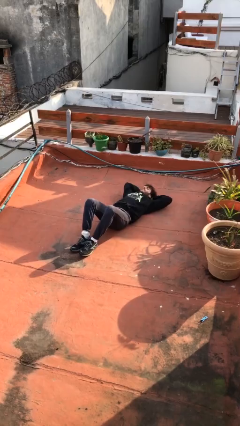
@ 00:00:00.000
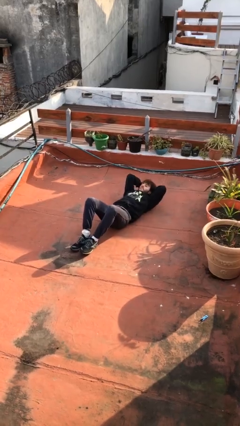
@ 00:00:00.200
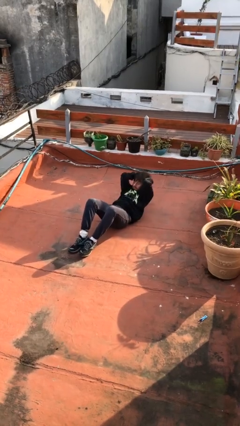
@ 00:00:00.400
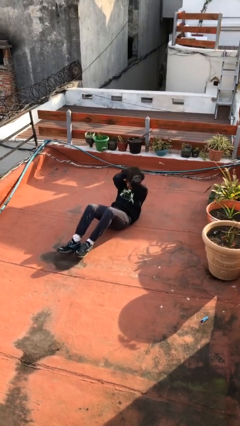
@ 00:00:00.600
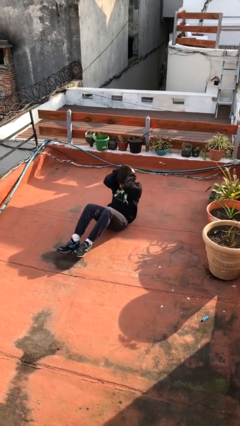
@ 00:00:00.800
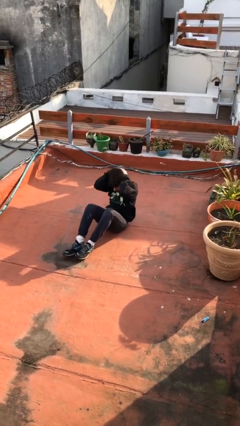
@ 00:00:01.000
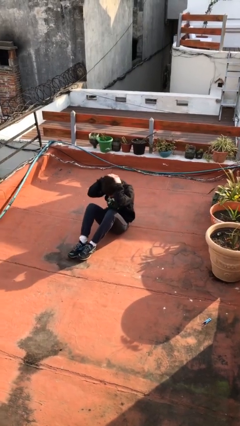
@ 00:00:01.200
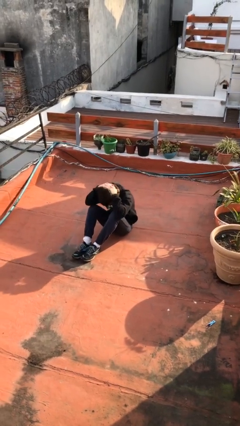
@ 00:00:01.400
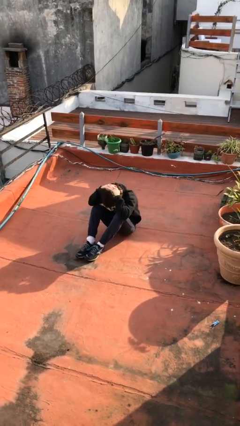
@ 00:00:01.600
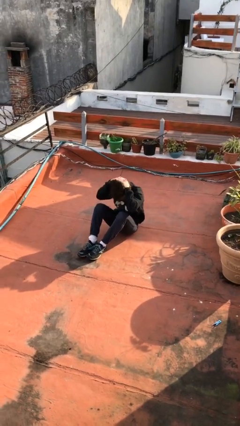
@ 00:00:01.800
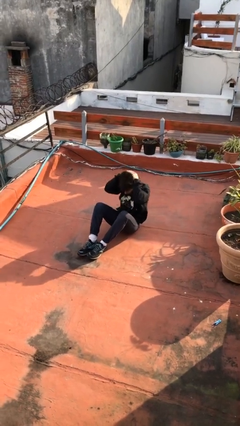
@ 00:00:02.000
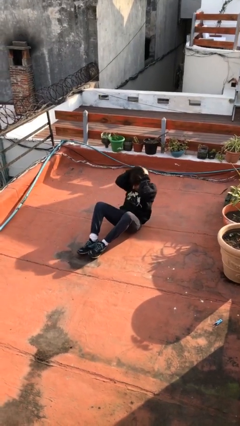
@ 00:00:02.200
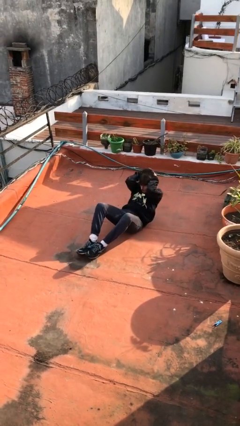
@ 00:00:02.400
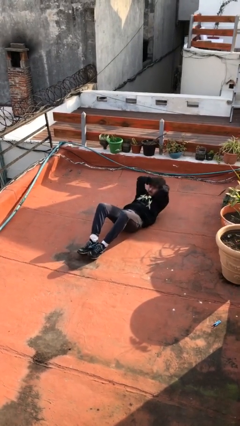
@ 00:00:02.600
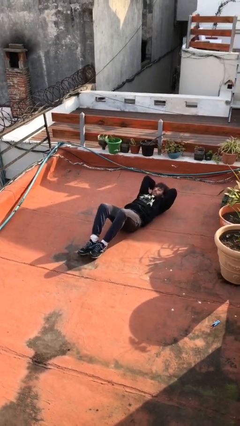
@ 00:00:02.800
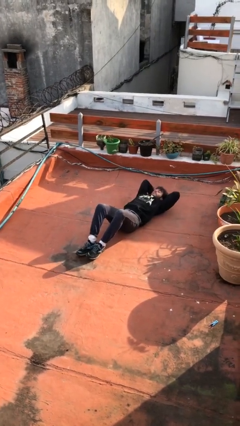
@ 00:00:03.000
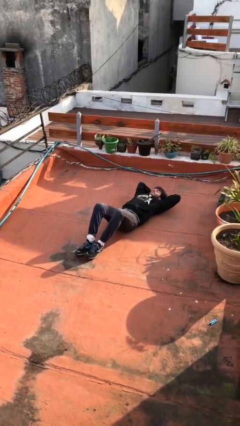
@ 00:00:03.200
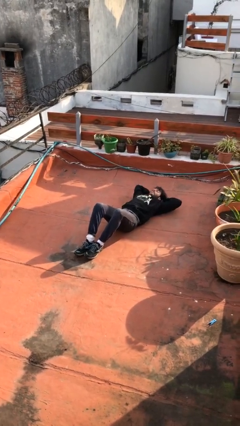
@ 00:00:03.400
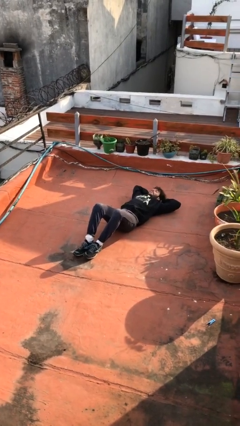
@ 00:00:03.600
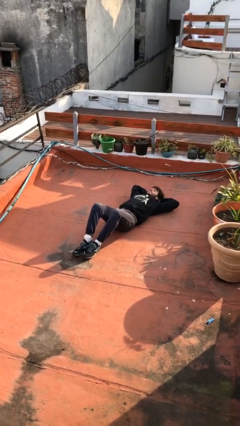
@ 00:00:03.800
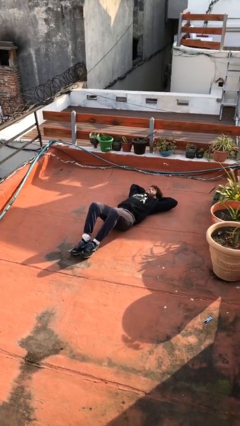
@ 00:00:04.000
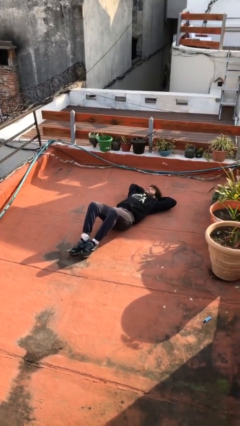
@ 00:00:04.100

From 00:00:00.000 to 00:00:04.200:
person exercises with situp

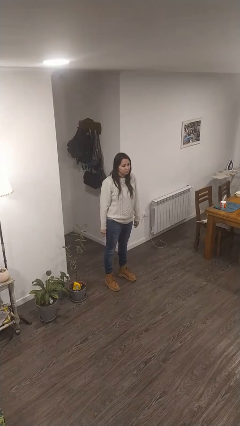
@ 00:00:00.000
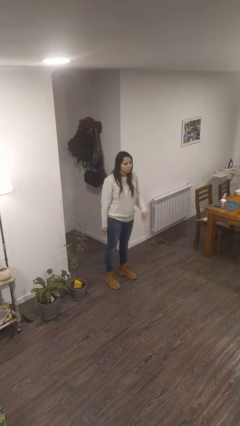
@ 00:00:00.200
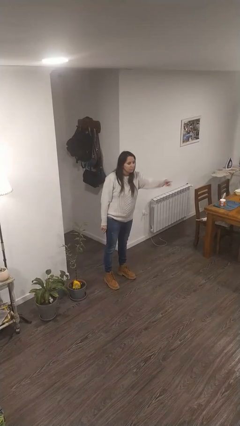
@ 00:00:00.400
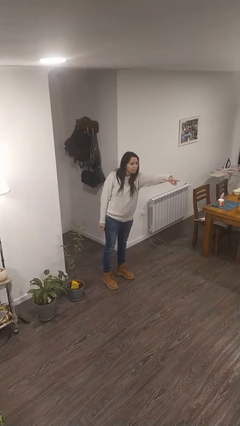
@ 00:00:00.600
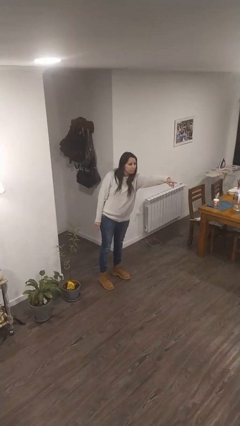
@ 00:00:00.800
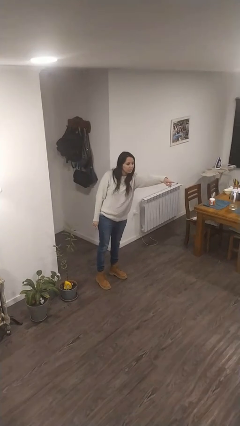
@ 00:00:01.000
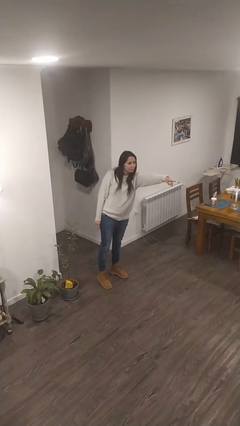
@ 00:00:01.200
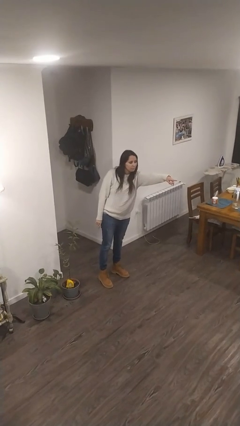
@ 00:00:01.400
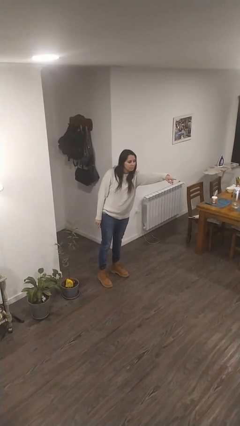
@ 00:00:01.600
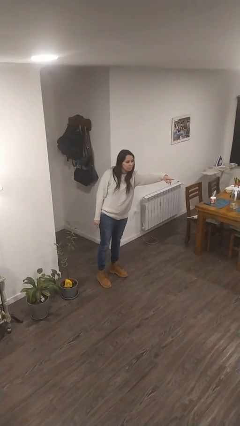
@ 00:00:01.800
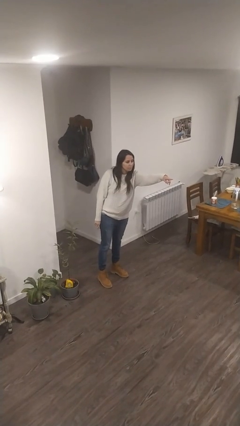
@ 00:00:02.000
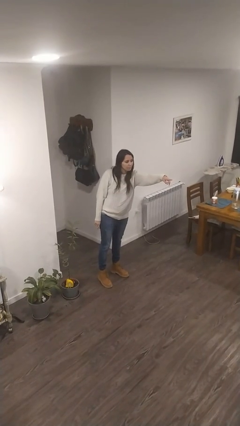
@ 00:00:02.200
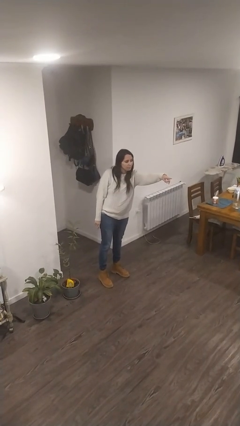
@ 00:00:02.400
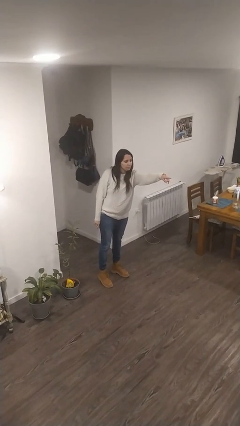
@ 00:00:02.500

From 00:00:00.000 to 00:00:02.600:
person points at person

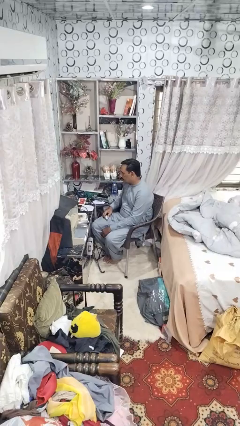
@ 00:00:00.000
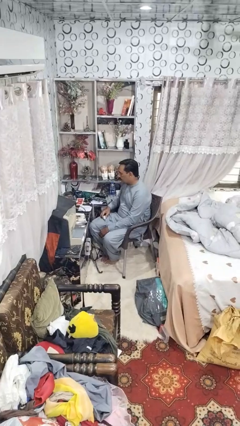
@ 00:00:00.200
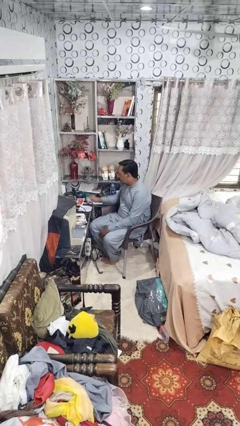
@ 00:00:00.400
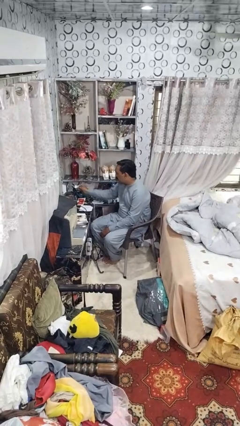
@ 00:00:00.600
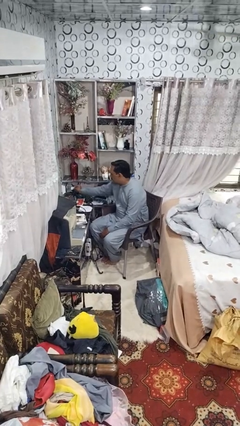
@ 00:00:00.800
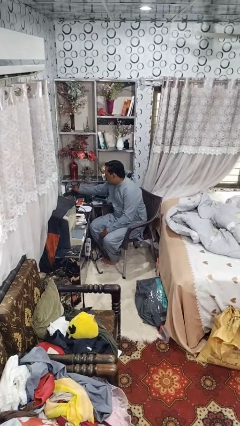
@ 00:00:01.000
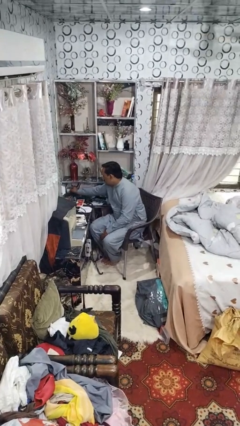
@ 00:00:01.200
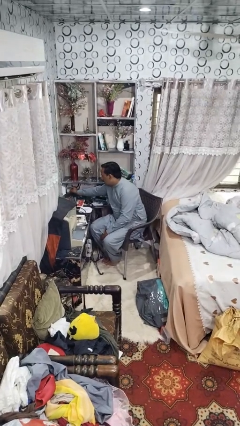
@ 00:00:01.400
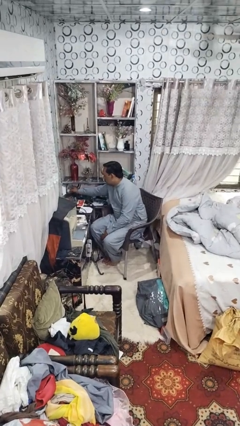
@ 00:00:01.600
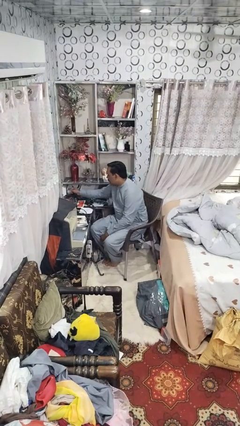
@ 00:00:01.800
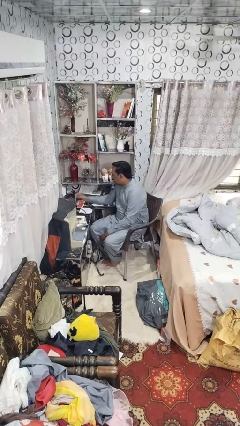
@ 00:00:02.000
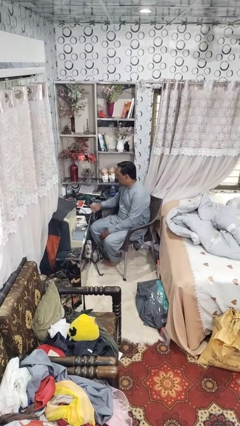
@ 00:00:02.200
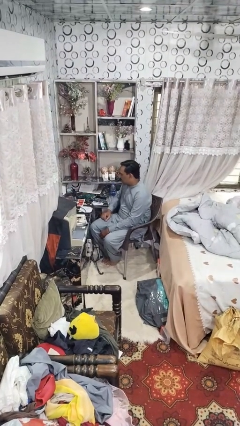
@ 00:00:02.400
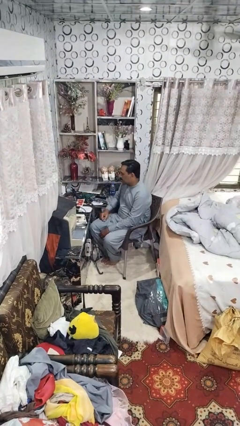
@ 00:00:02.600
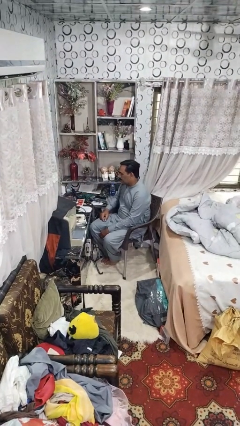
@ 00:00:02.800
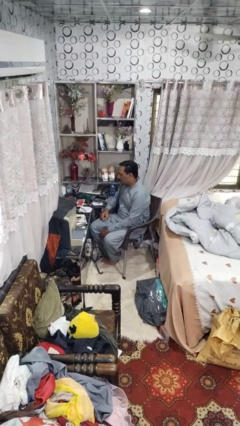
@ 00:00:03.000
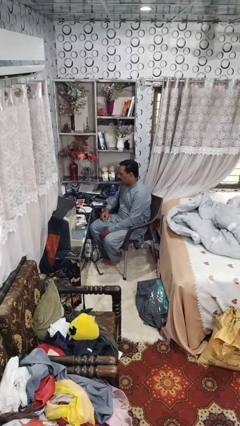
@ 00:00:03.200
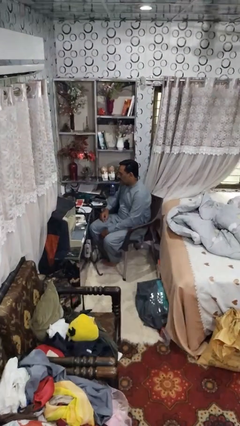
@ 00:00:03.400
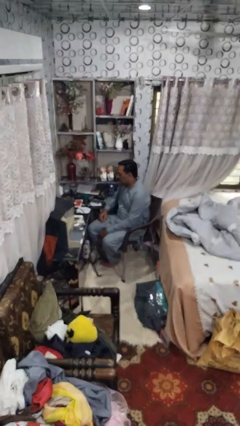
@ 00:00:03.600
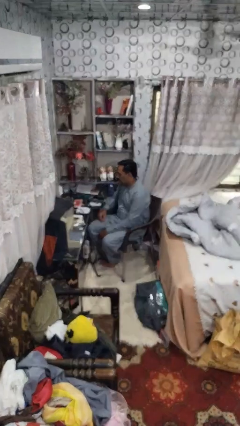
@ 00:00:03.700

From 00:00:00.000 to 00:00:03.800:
person plugs into electrical socket

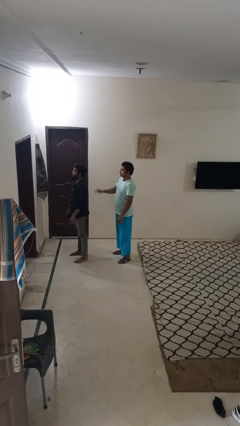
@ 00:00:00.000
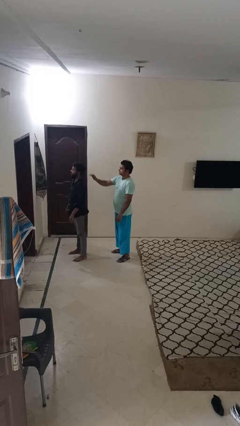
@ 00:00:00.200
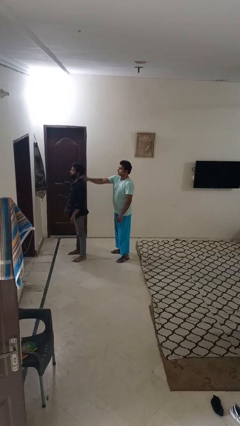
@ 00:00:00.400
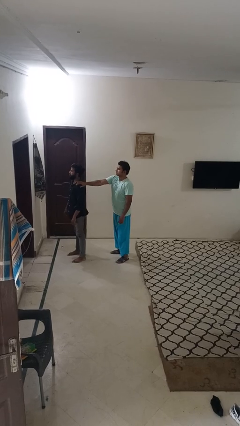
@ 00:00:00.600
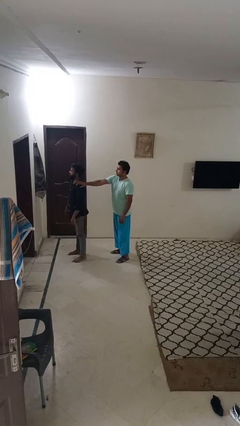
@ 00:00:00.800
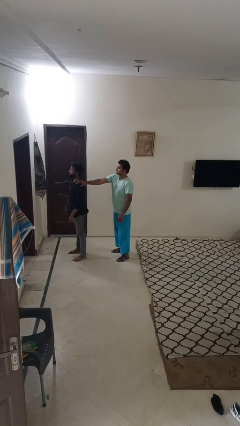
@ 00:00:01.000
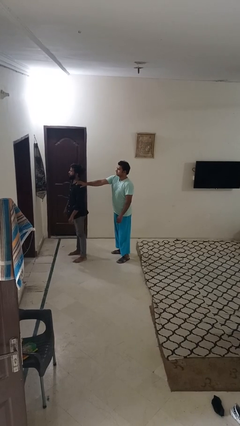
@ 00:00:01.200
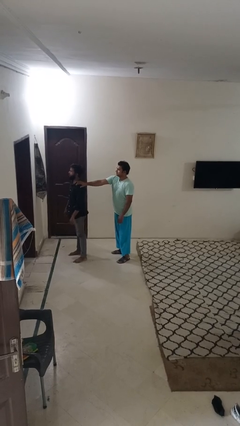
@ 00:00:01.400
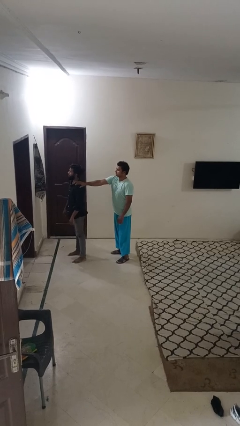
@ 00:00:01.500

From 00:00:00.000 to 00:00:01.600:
person grabs person by shoulder

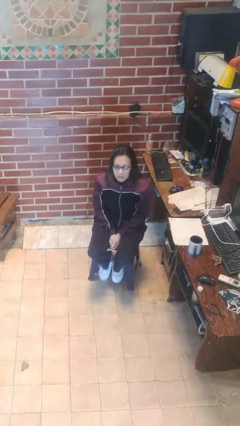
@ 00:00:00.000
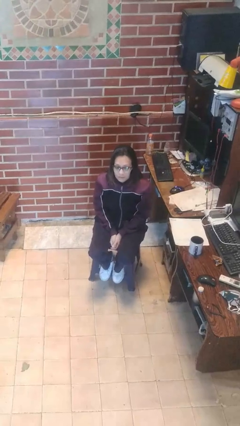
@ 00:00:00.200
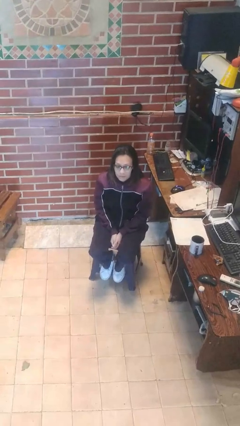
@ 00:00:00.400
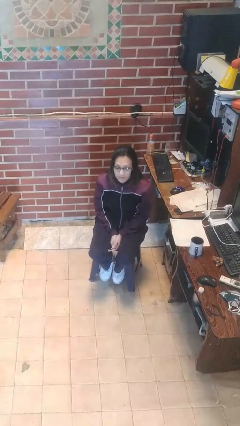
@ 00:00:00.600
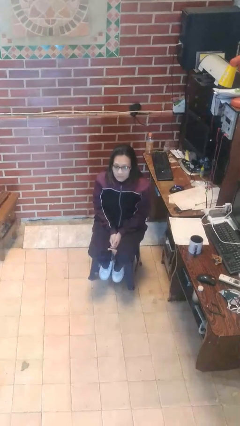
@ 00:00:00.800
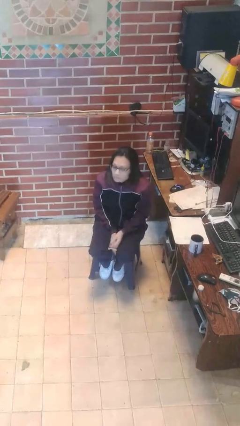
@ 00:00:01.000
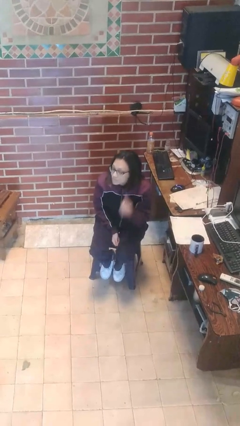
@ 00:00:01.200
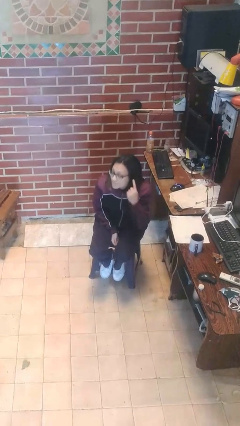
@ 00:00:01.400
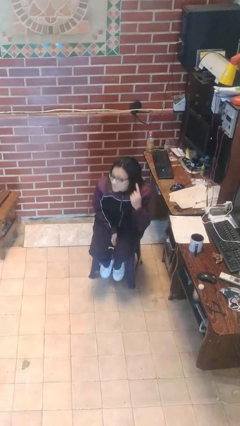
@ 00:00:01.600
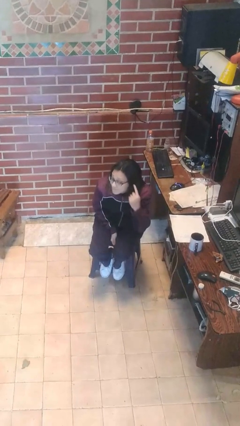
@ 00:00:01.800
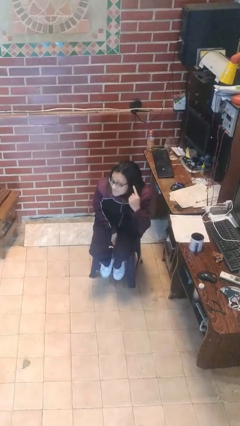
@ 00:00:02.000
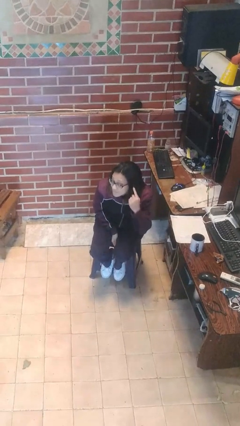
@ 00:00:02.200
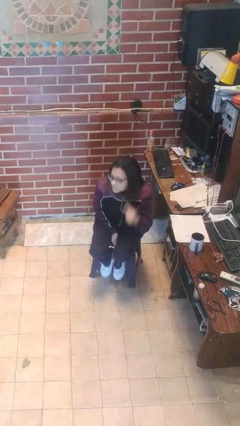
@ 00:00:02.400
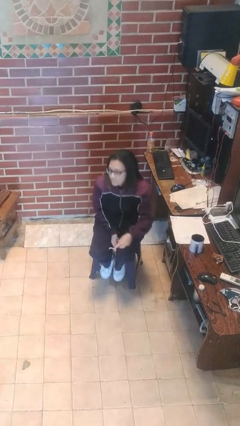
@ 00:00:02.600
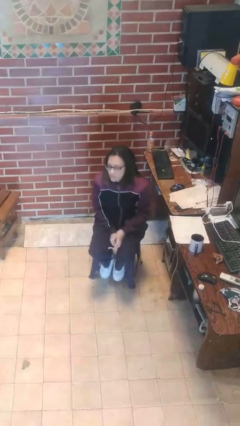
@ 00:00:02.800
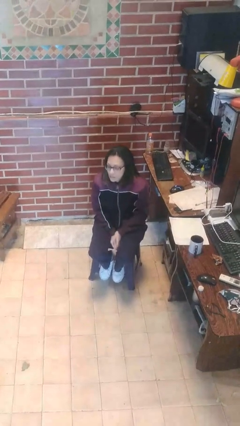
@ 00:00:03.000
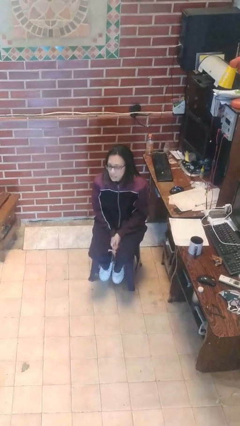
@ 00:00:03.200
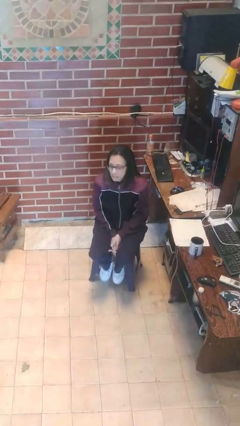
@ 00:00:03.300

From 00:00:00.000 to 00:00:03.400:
person gestures listen closely

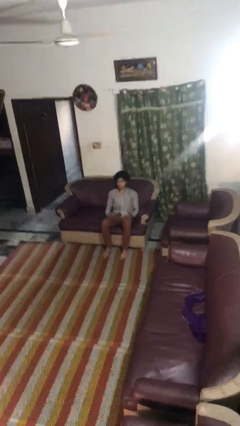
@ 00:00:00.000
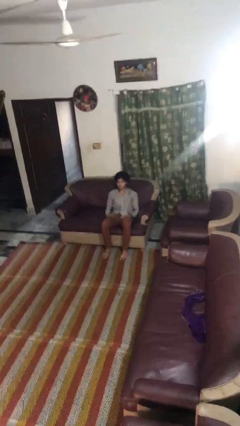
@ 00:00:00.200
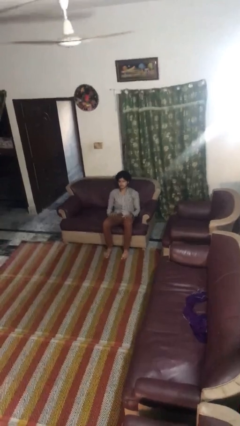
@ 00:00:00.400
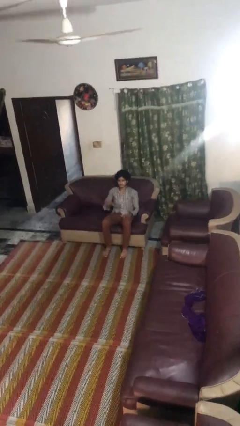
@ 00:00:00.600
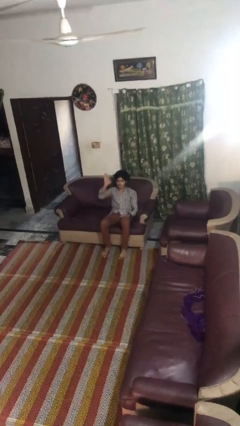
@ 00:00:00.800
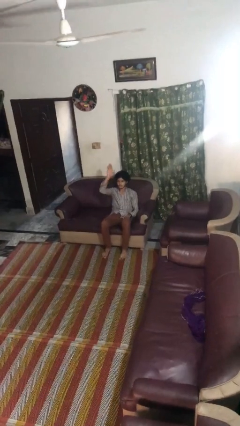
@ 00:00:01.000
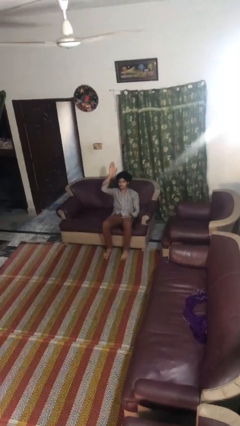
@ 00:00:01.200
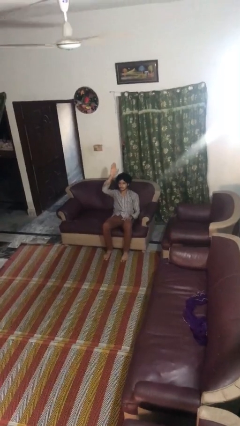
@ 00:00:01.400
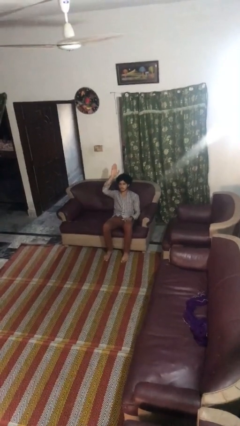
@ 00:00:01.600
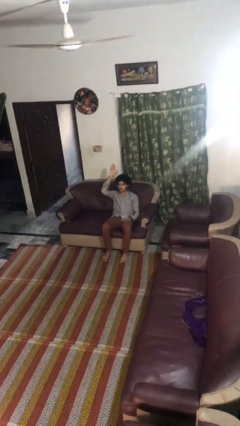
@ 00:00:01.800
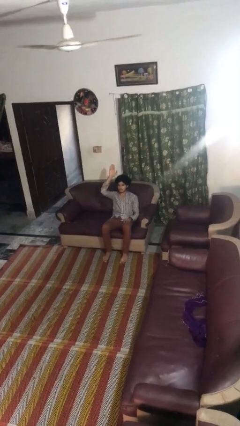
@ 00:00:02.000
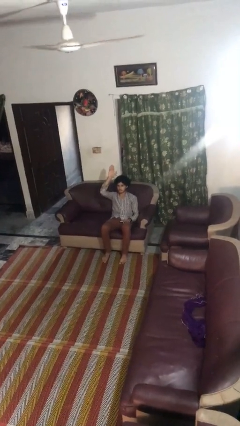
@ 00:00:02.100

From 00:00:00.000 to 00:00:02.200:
person gestures raise hand
